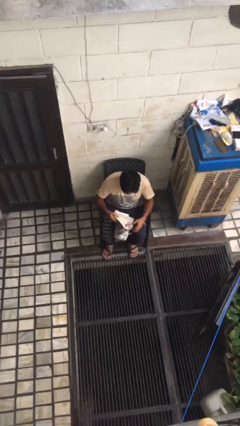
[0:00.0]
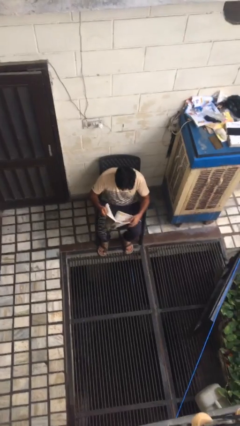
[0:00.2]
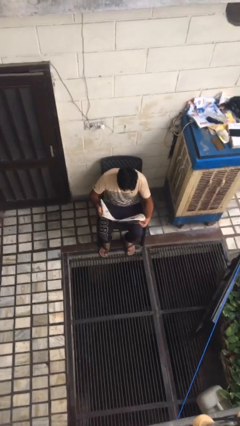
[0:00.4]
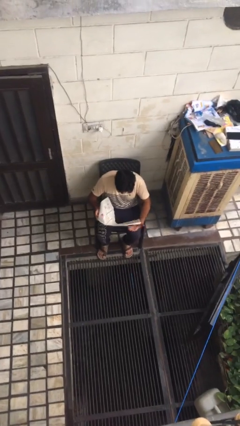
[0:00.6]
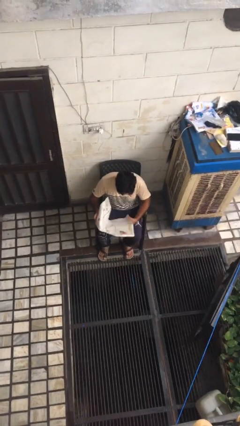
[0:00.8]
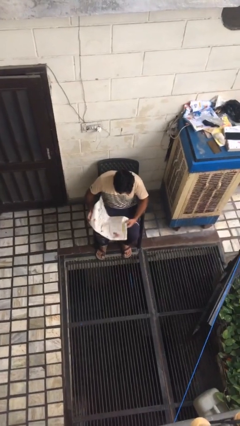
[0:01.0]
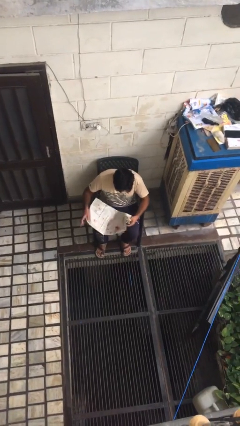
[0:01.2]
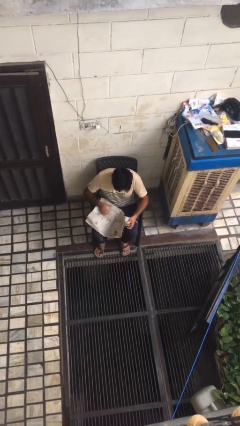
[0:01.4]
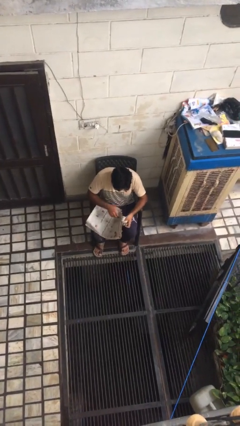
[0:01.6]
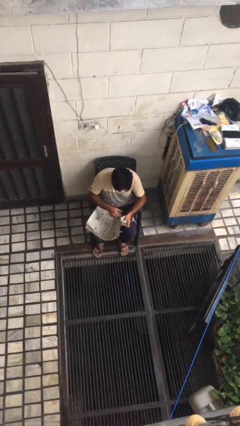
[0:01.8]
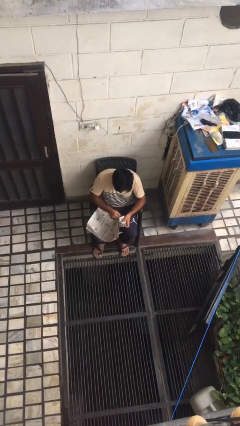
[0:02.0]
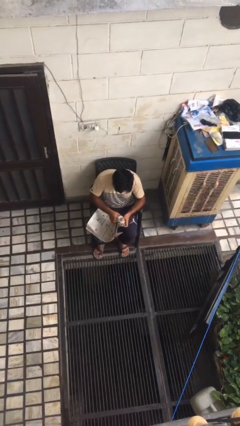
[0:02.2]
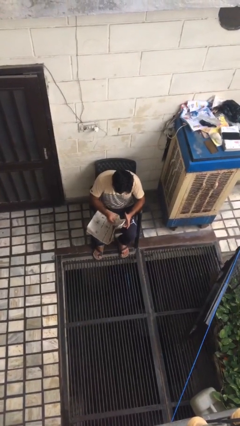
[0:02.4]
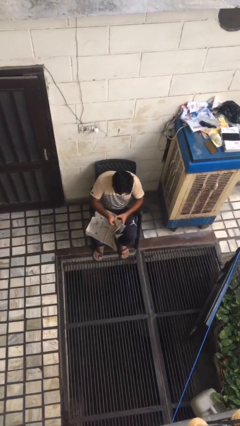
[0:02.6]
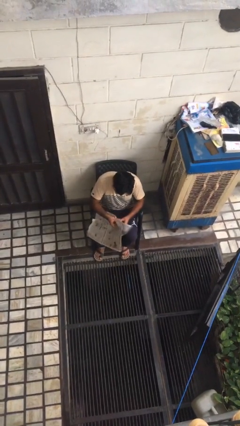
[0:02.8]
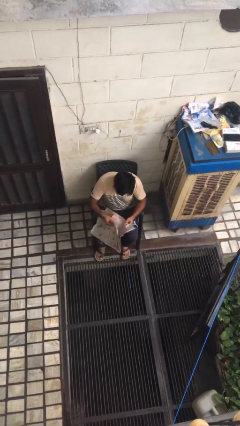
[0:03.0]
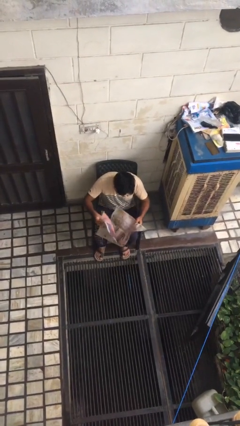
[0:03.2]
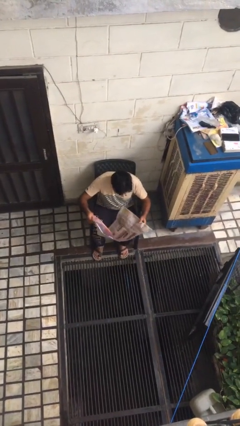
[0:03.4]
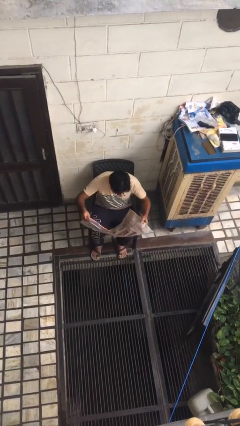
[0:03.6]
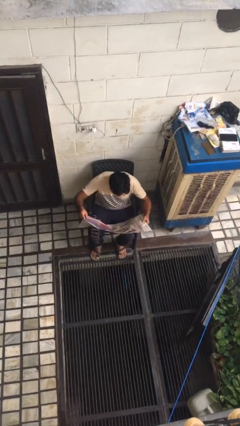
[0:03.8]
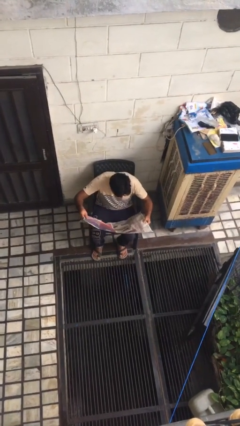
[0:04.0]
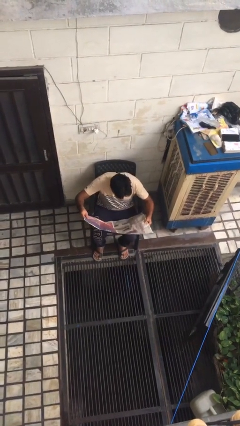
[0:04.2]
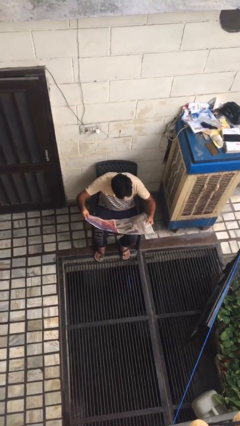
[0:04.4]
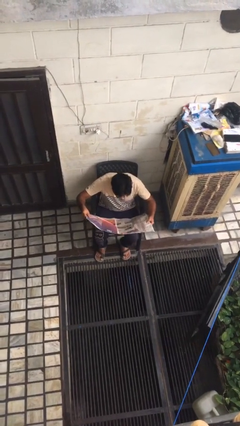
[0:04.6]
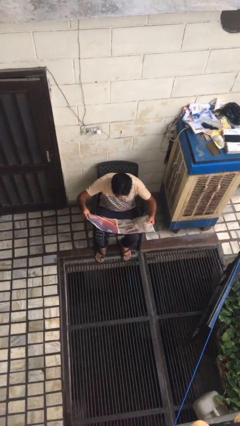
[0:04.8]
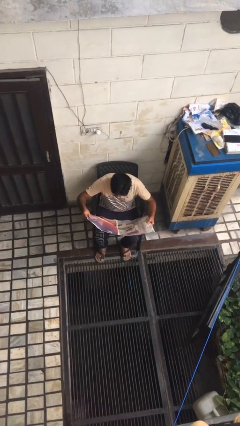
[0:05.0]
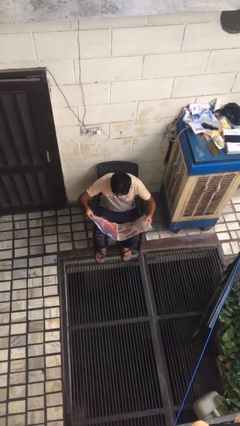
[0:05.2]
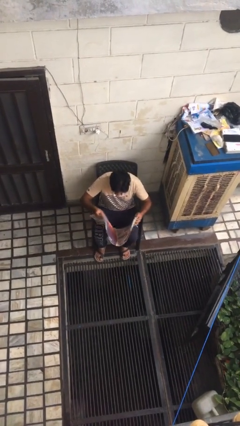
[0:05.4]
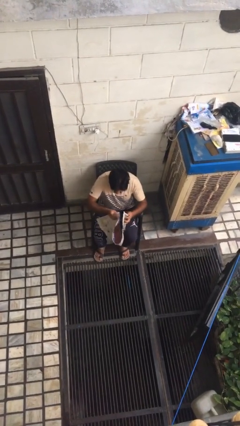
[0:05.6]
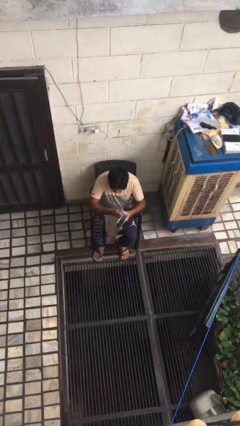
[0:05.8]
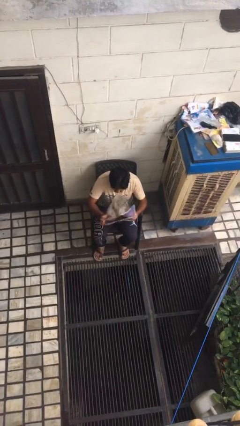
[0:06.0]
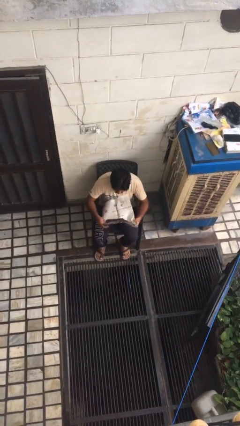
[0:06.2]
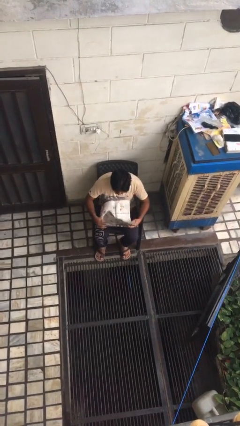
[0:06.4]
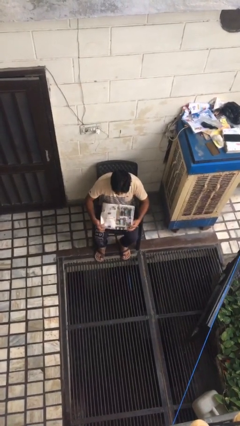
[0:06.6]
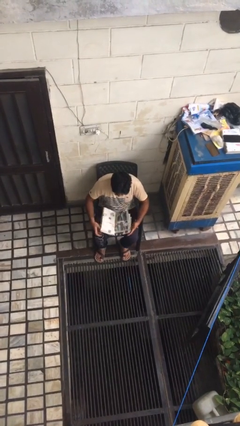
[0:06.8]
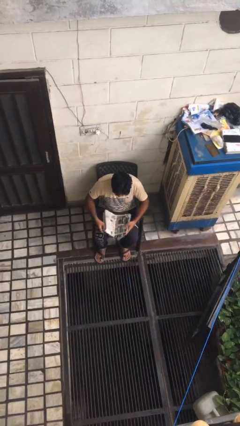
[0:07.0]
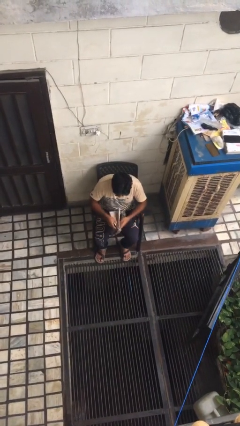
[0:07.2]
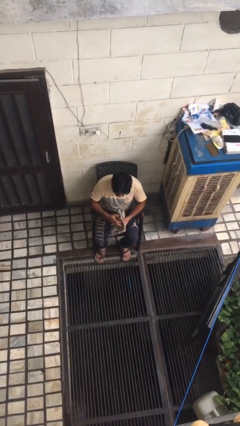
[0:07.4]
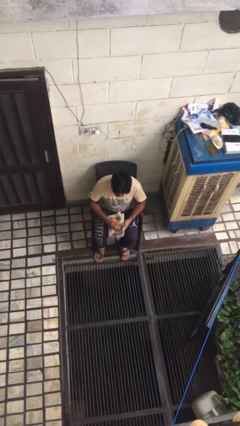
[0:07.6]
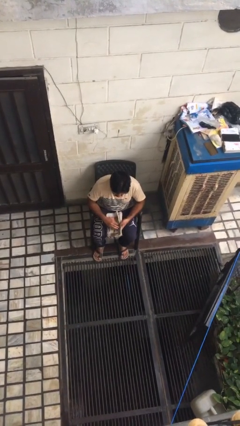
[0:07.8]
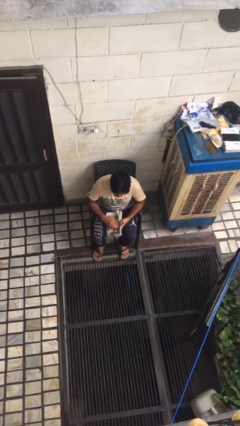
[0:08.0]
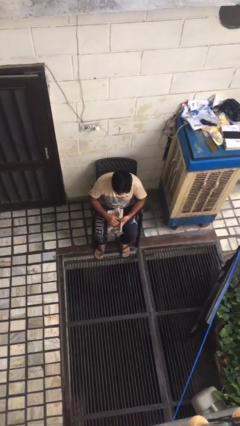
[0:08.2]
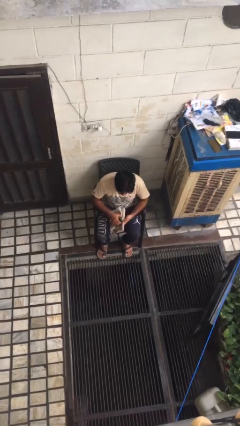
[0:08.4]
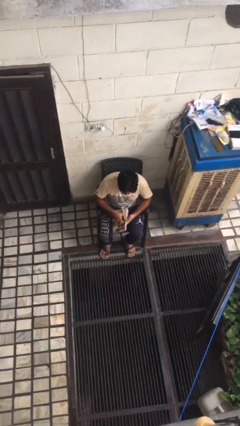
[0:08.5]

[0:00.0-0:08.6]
person reads newspaper

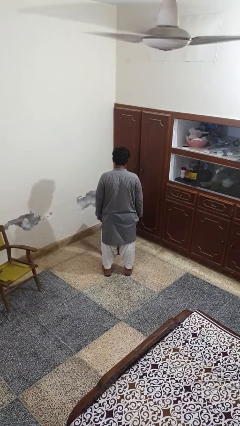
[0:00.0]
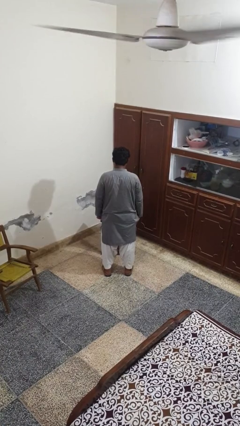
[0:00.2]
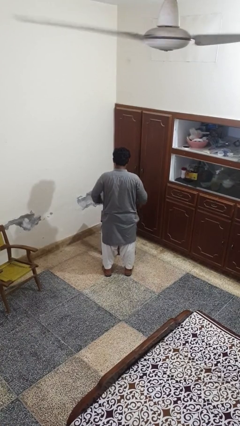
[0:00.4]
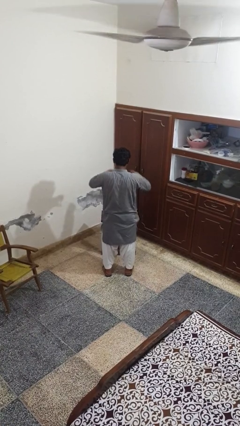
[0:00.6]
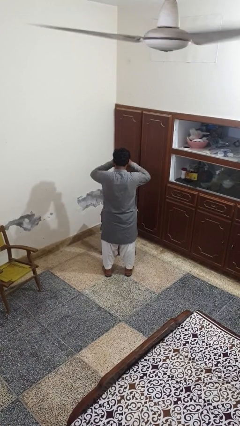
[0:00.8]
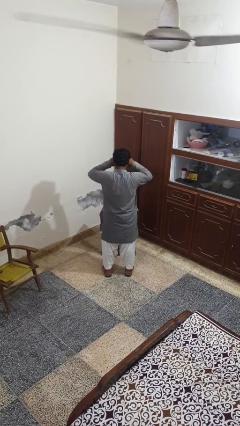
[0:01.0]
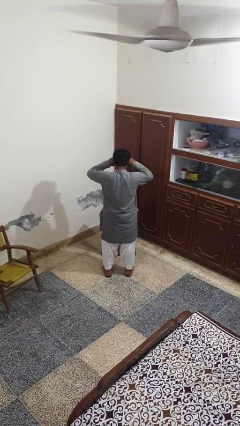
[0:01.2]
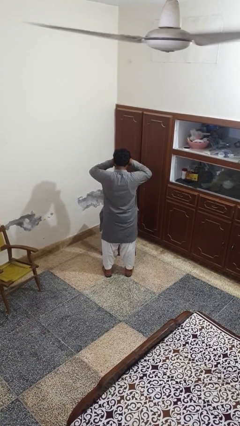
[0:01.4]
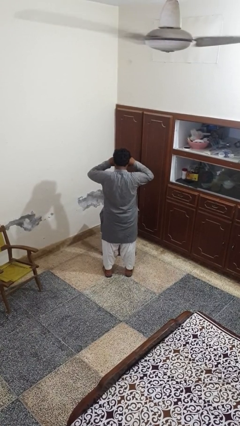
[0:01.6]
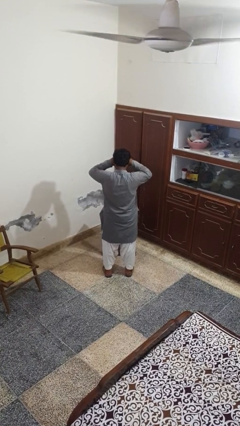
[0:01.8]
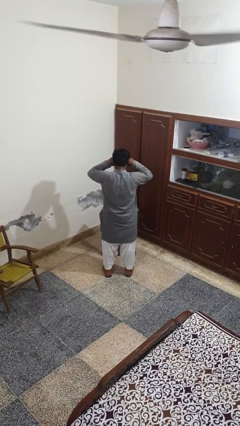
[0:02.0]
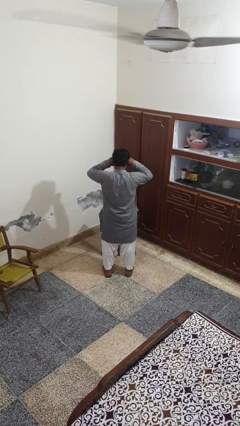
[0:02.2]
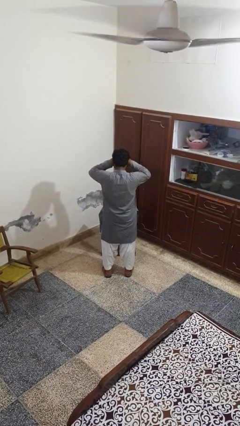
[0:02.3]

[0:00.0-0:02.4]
person rubs eyes

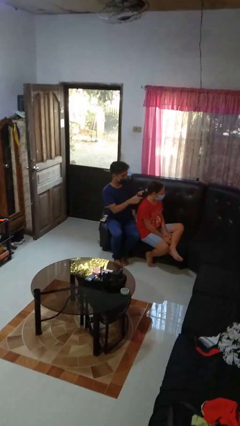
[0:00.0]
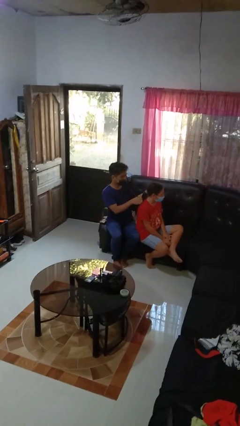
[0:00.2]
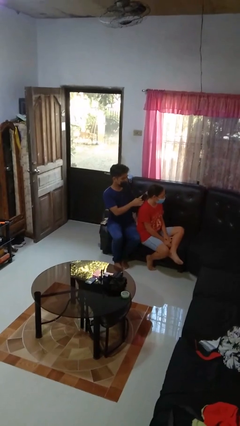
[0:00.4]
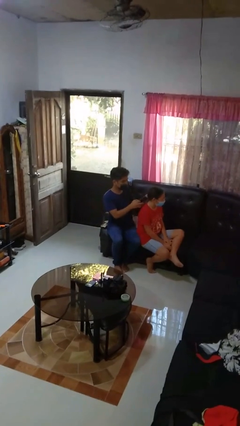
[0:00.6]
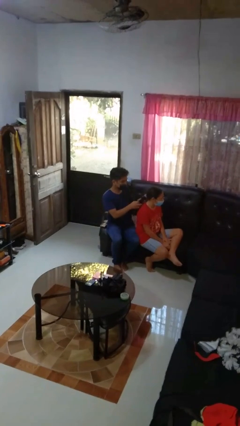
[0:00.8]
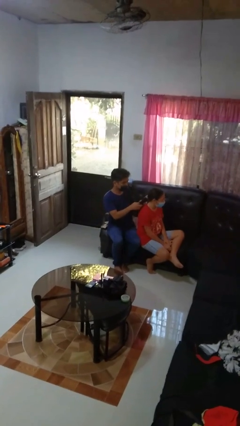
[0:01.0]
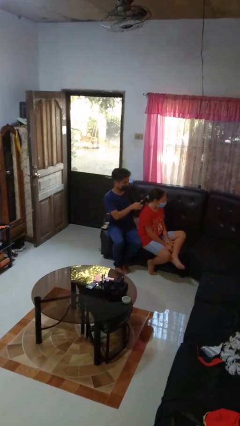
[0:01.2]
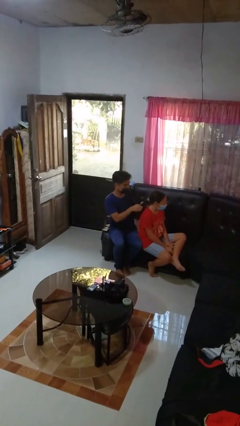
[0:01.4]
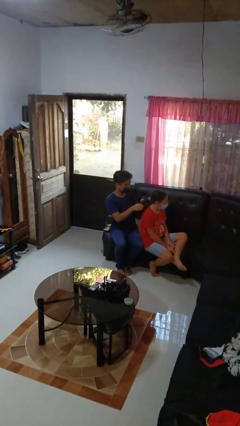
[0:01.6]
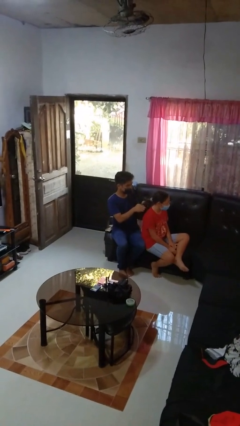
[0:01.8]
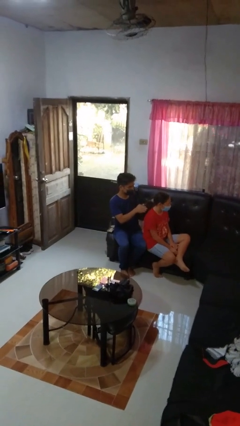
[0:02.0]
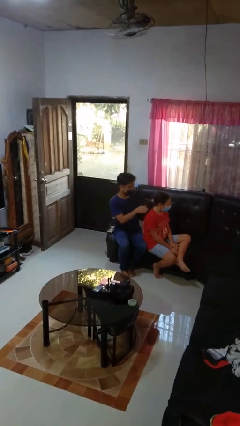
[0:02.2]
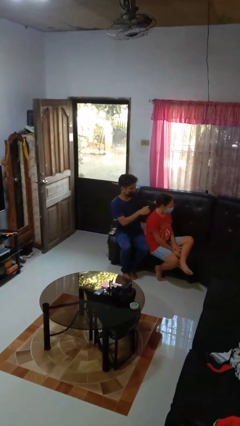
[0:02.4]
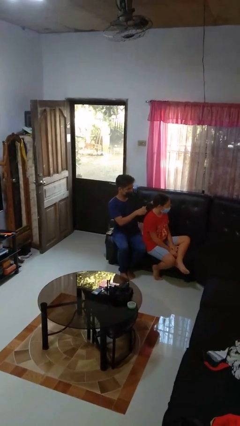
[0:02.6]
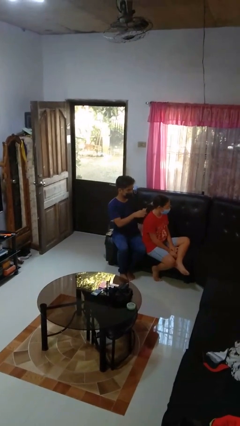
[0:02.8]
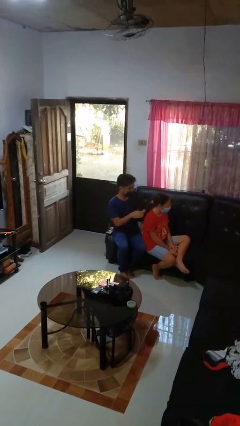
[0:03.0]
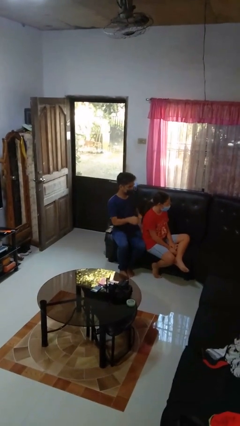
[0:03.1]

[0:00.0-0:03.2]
person braids hair of person

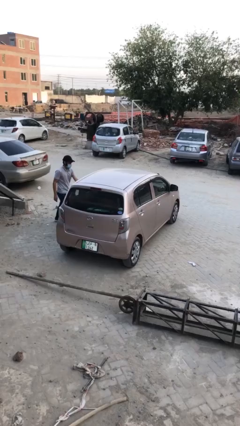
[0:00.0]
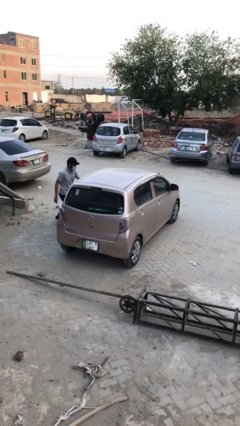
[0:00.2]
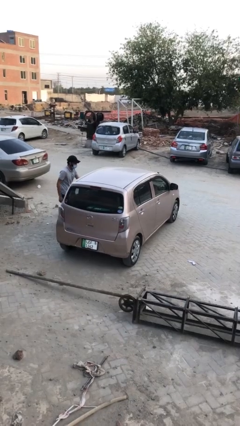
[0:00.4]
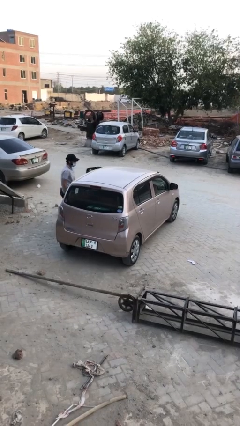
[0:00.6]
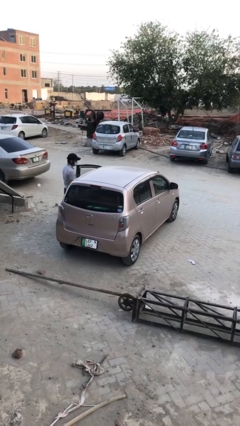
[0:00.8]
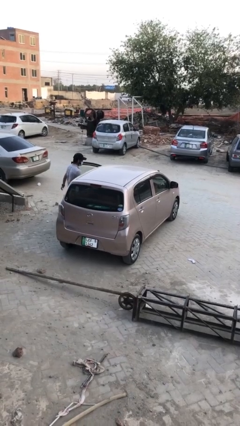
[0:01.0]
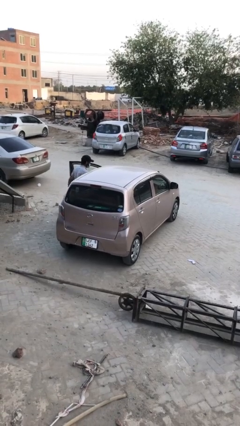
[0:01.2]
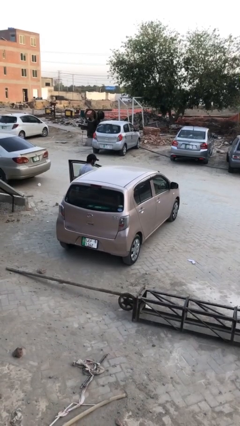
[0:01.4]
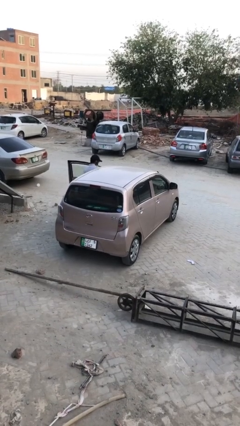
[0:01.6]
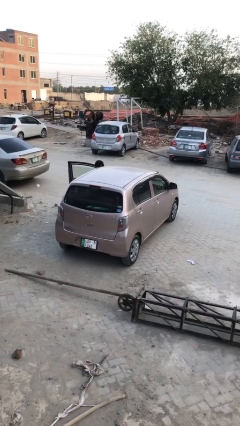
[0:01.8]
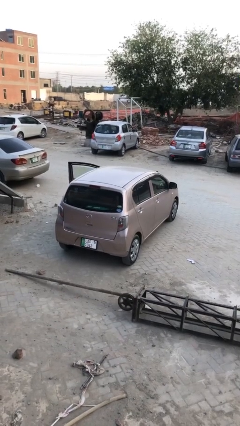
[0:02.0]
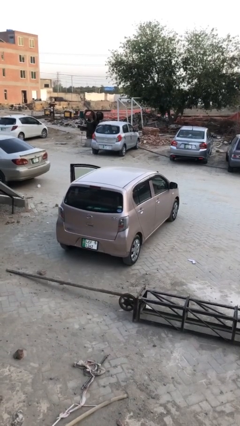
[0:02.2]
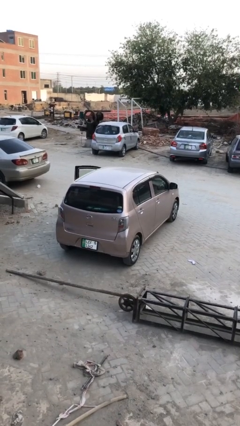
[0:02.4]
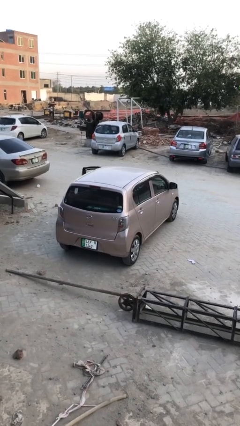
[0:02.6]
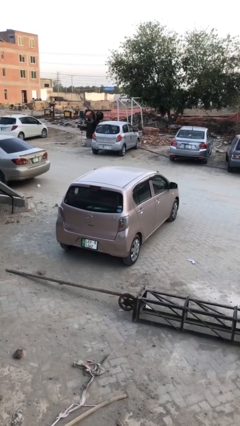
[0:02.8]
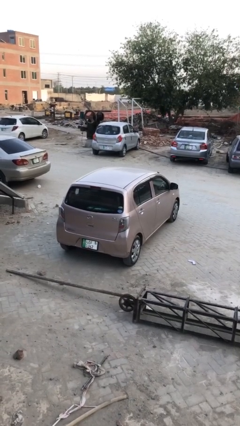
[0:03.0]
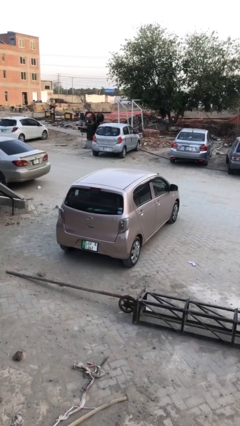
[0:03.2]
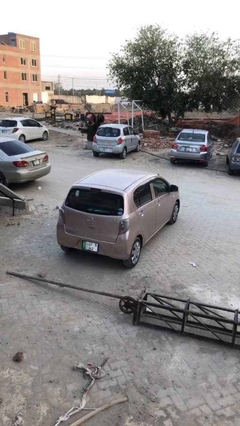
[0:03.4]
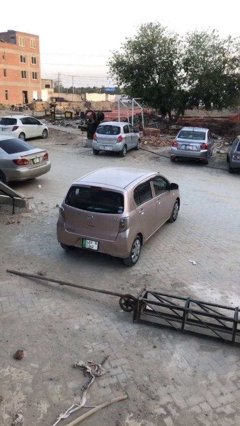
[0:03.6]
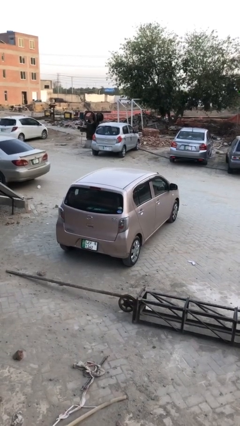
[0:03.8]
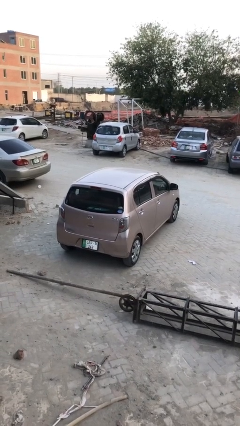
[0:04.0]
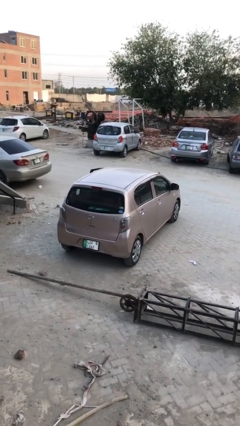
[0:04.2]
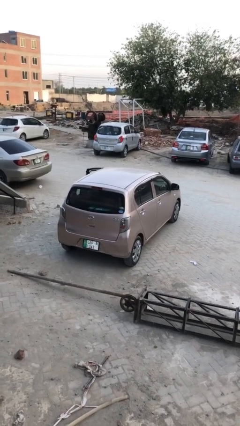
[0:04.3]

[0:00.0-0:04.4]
car picks up person
